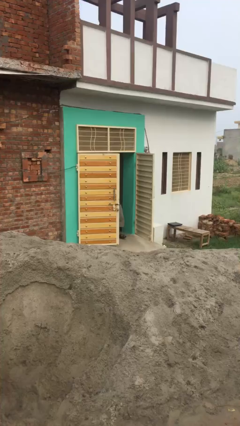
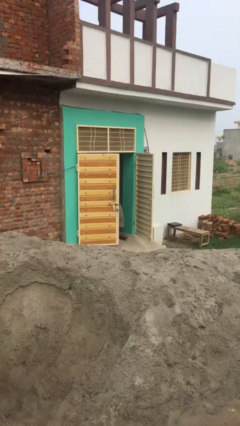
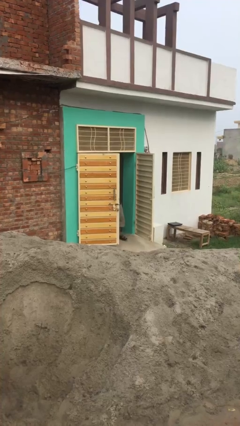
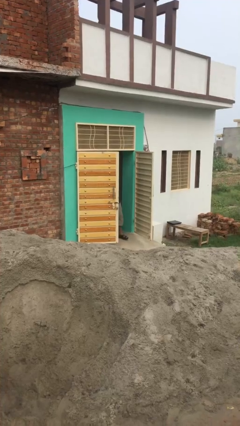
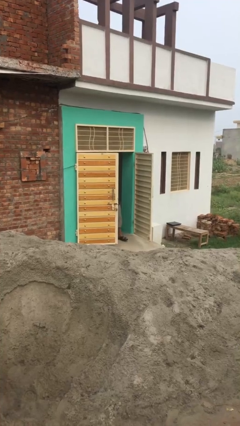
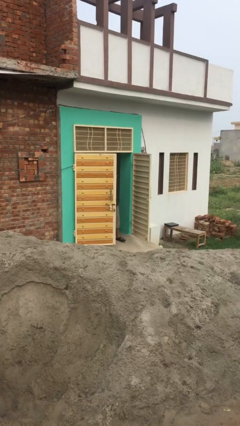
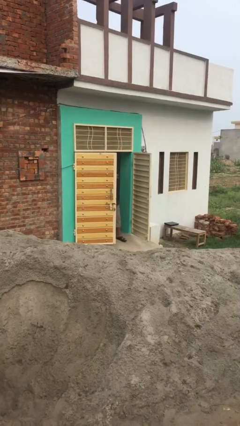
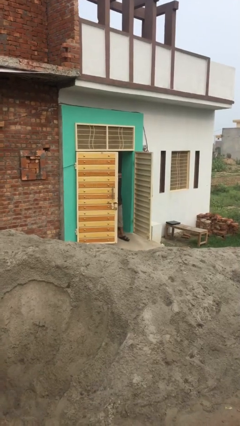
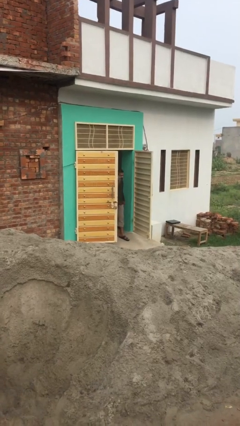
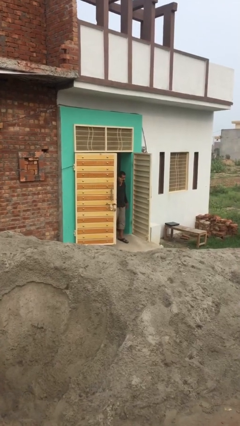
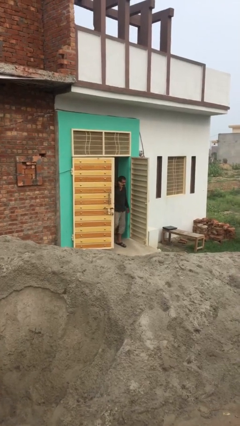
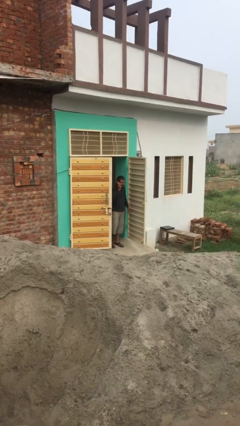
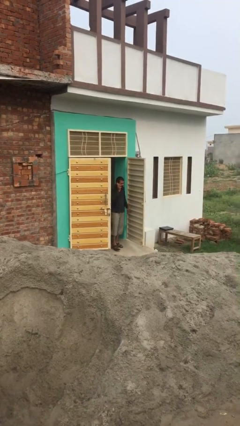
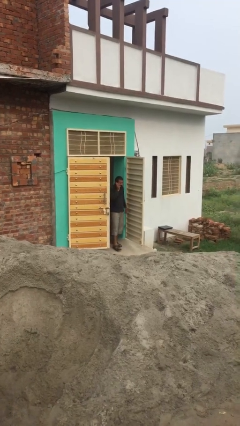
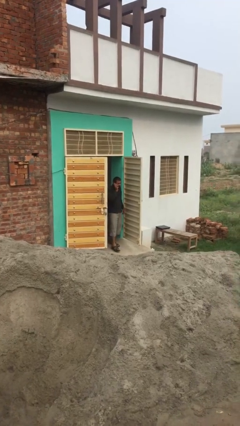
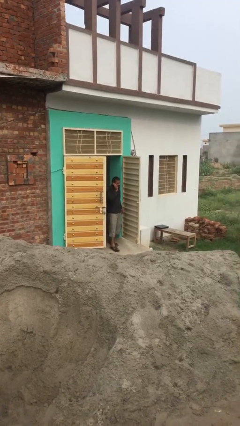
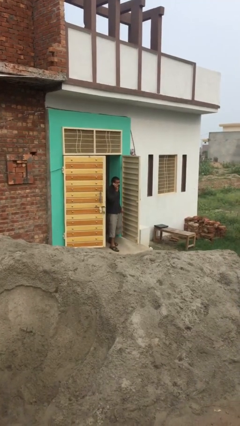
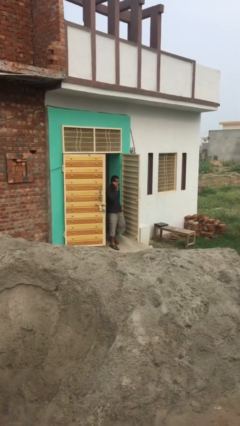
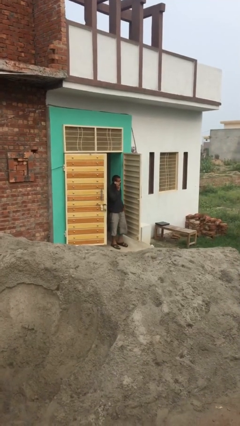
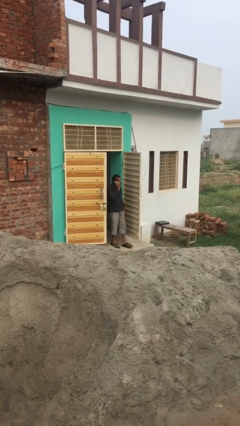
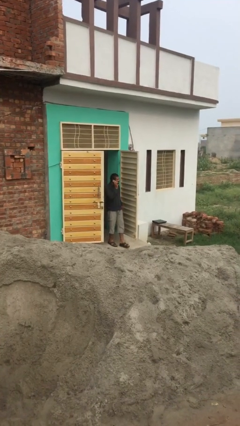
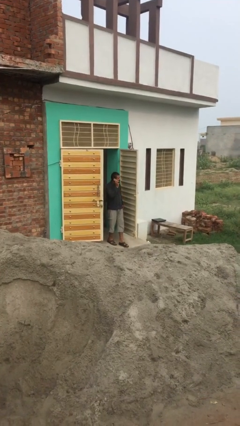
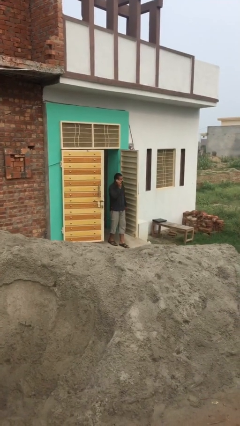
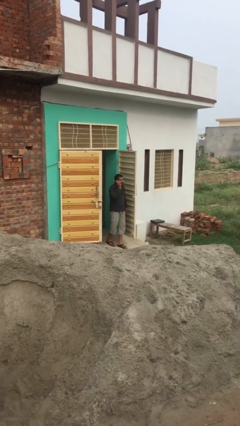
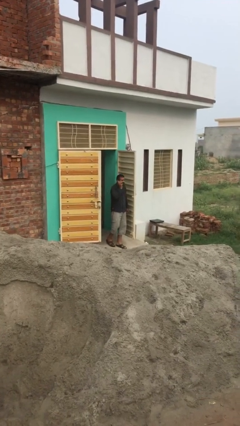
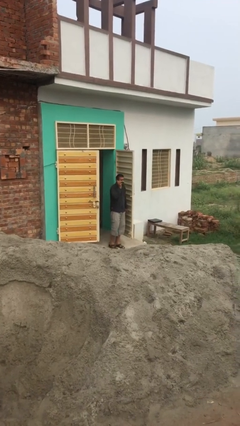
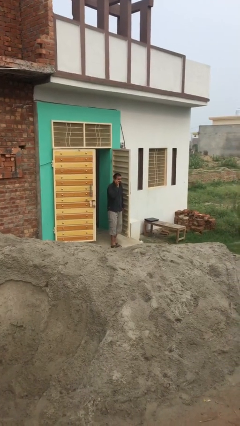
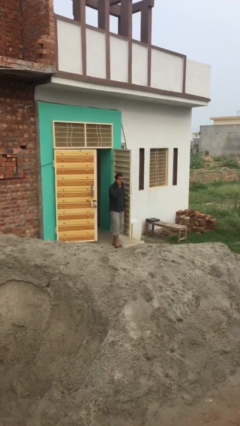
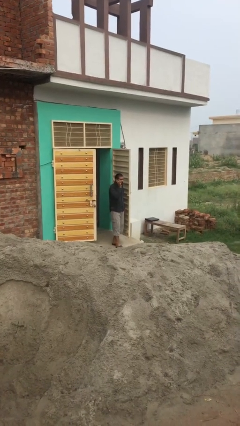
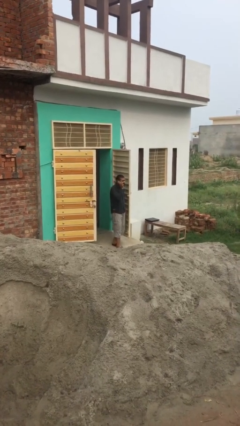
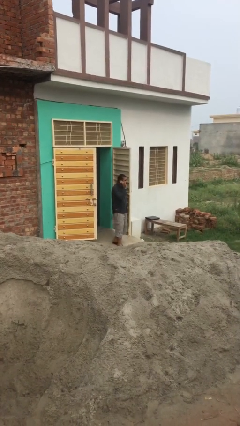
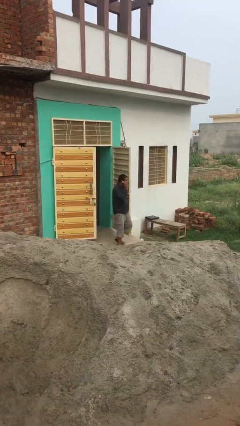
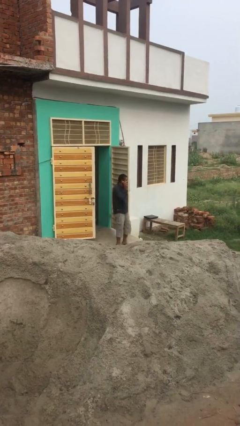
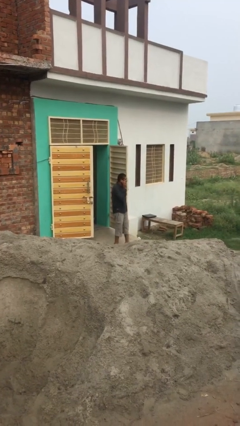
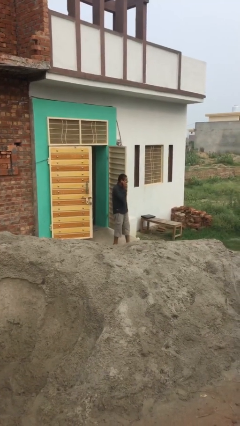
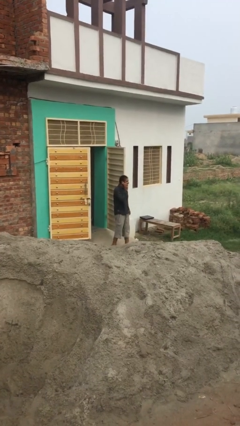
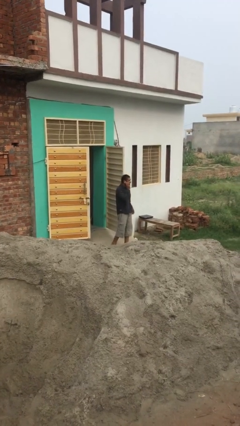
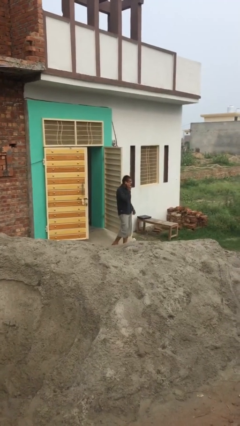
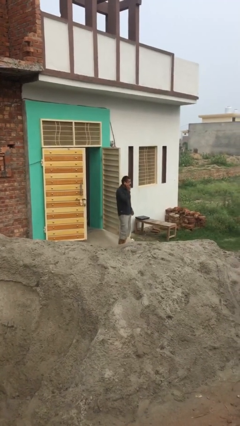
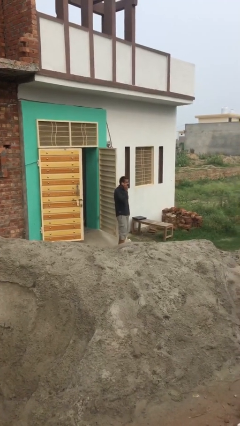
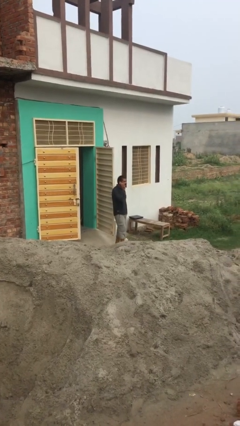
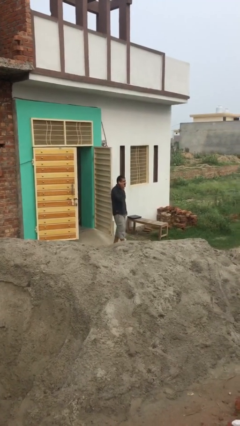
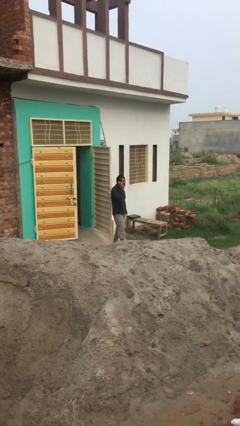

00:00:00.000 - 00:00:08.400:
person enters scene through structure

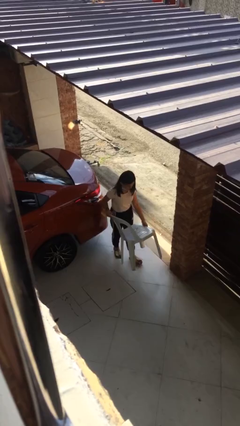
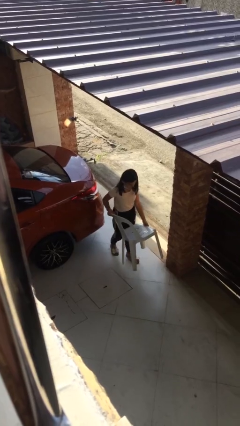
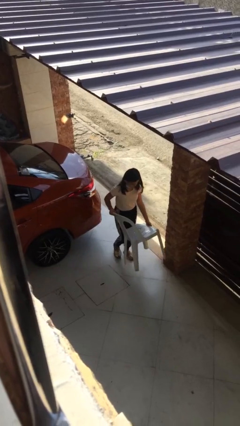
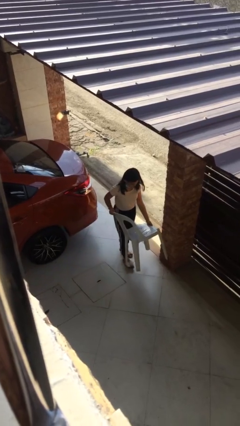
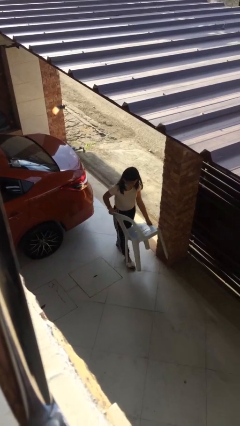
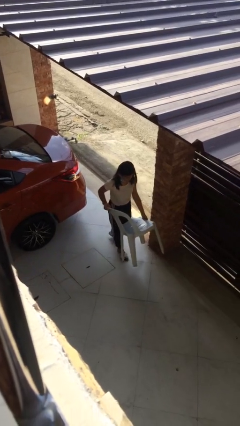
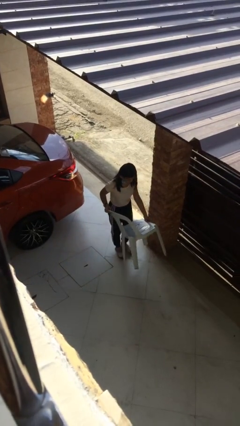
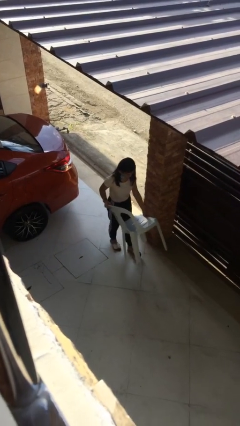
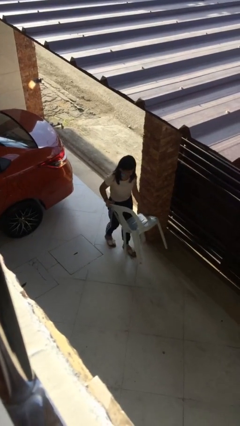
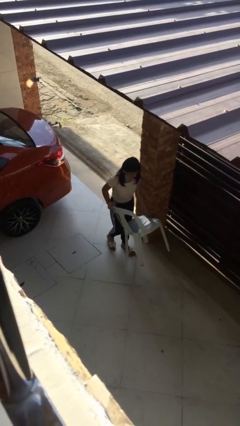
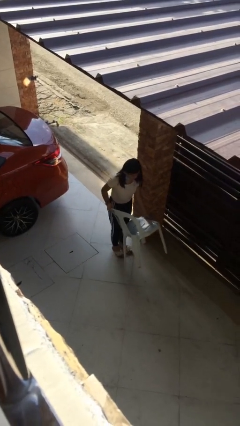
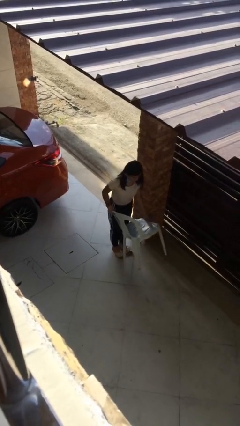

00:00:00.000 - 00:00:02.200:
person carries heavy object

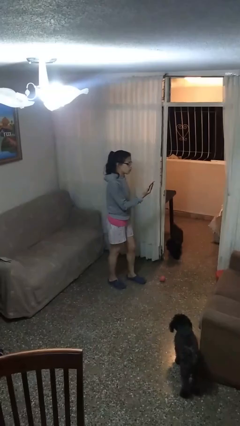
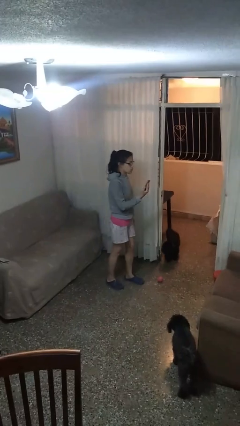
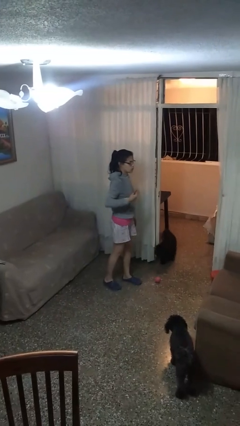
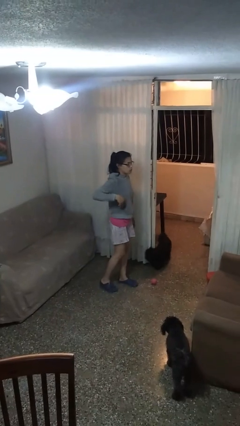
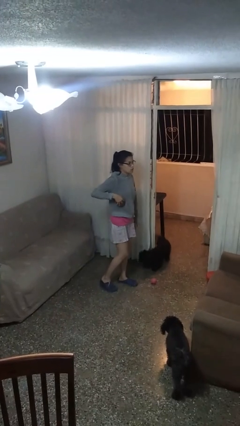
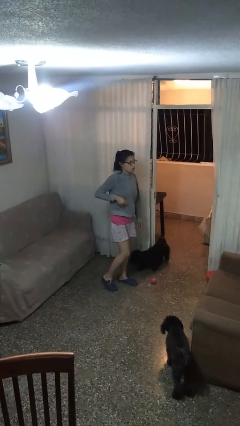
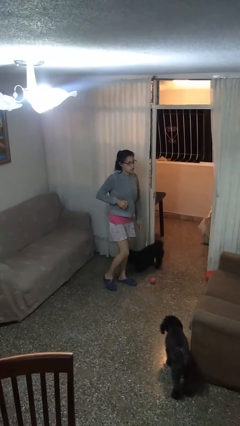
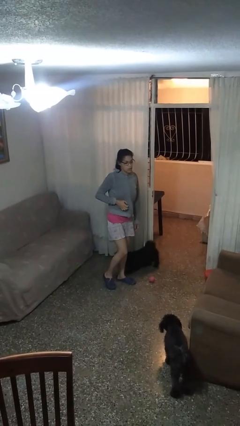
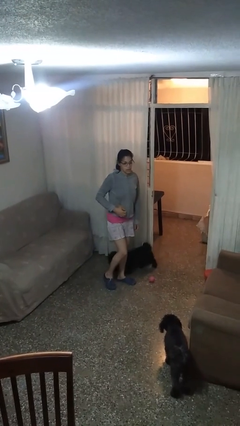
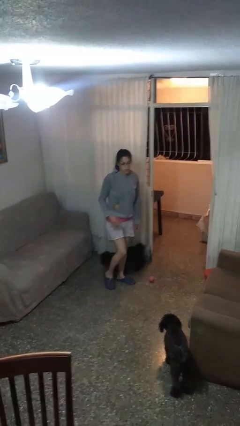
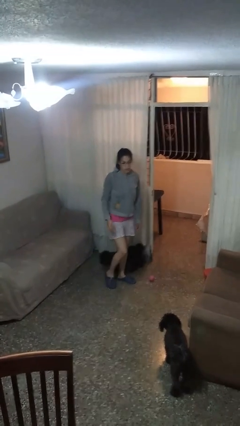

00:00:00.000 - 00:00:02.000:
person puts phone into pocket

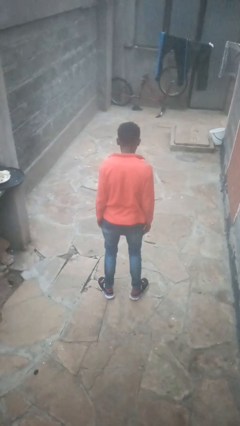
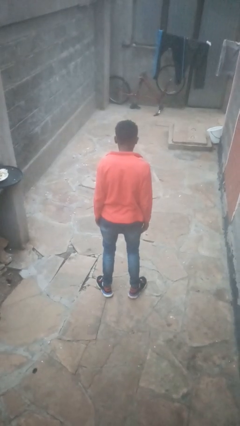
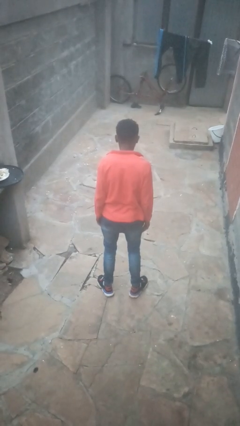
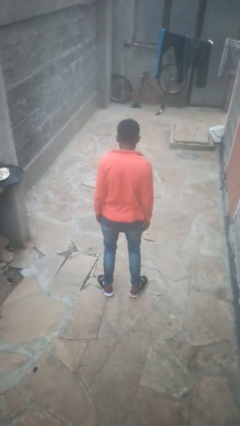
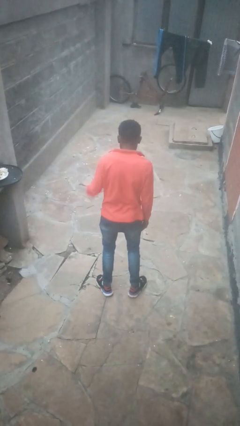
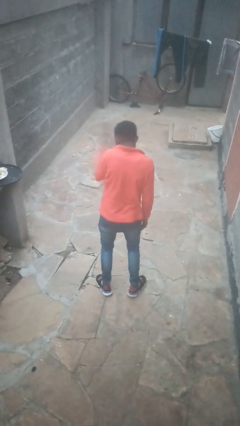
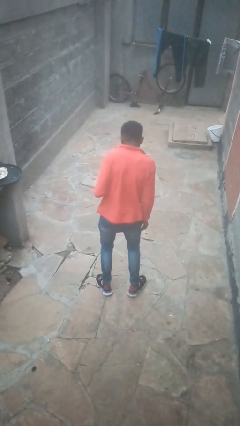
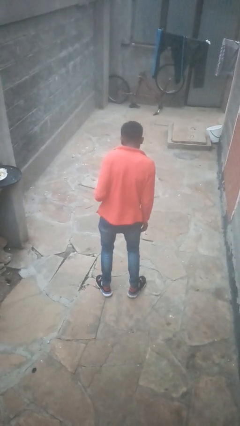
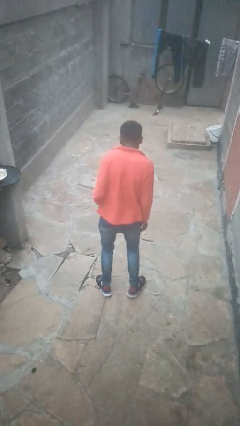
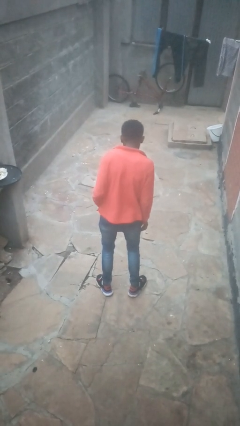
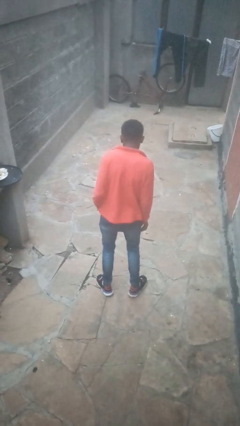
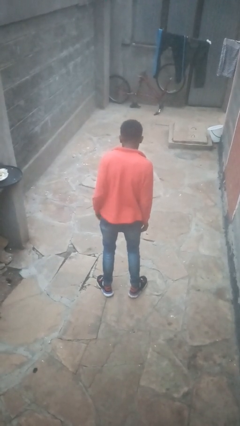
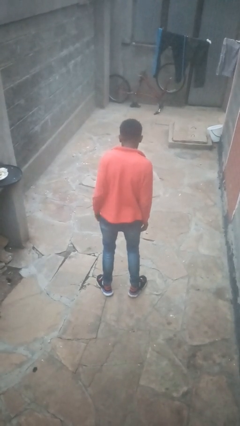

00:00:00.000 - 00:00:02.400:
person swats bug

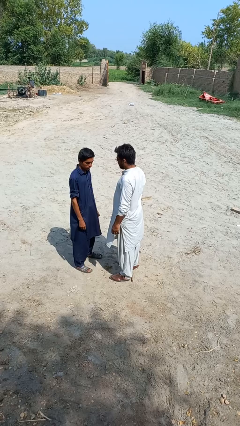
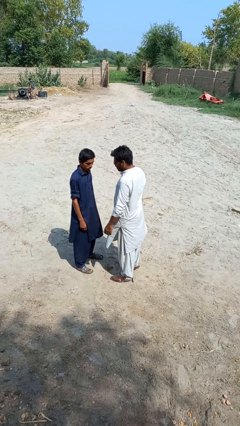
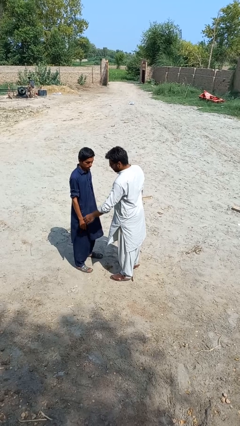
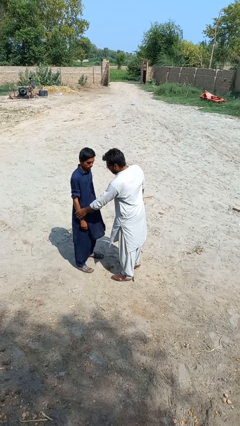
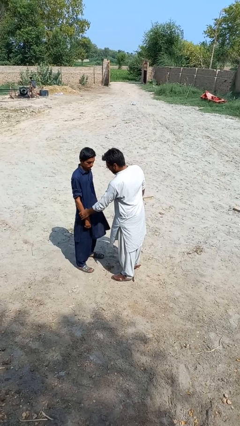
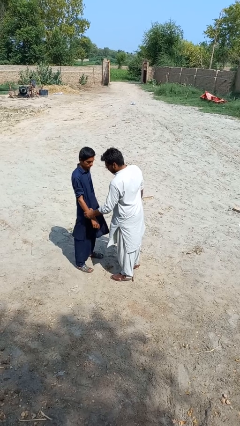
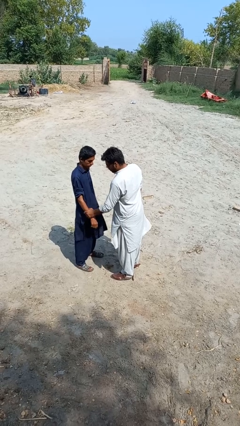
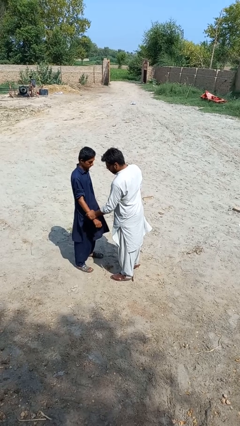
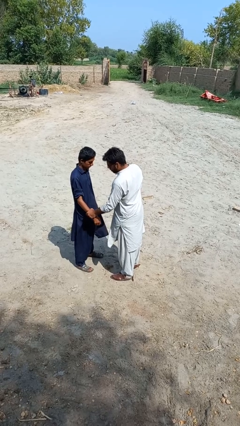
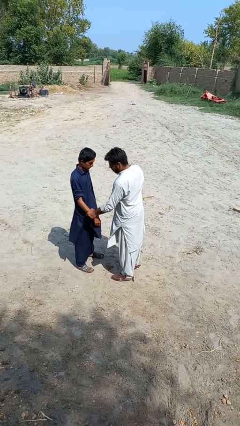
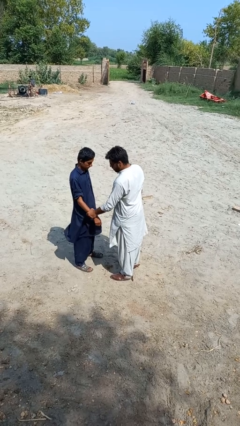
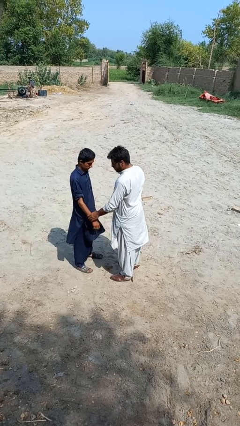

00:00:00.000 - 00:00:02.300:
person grabs person by forearm
